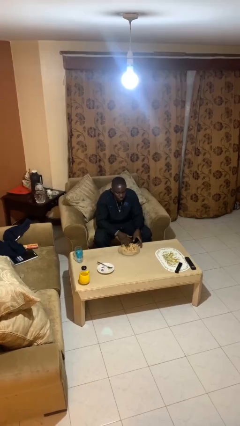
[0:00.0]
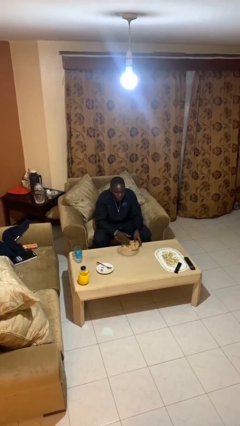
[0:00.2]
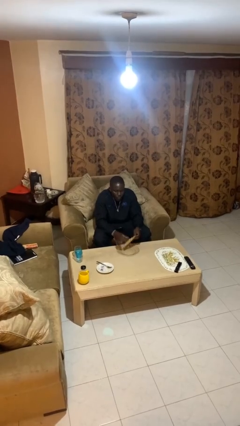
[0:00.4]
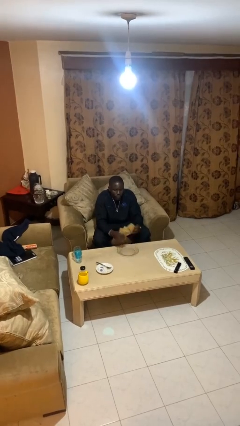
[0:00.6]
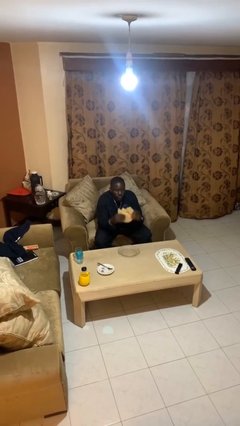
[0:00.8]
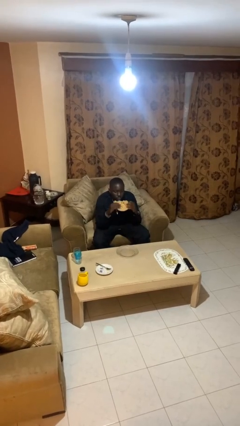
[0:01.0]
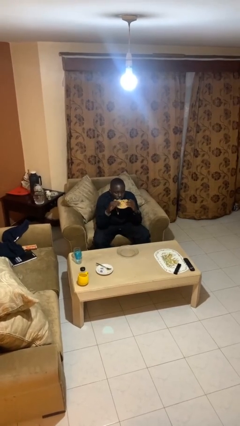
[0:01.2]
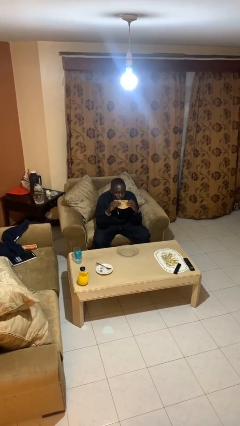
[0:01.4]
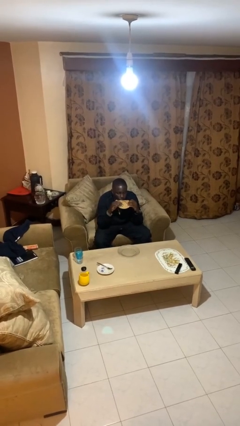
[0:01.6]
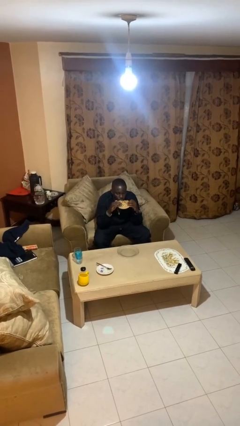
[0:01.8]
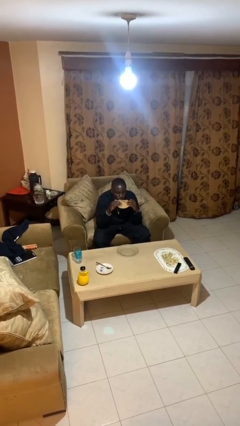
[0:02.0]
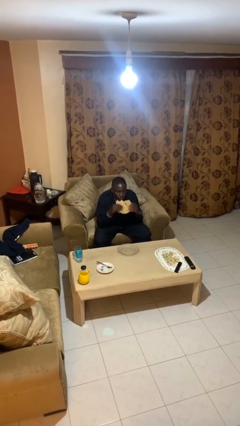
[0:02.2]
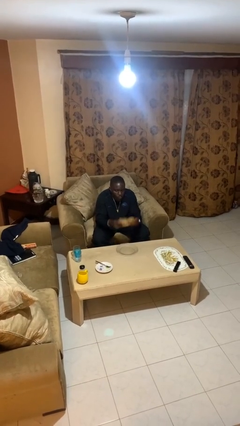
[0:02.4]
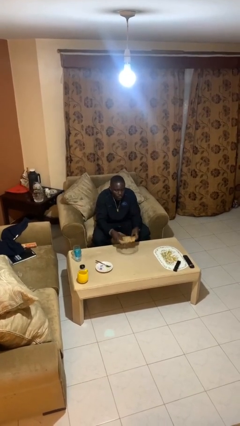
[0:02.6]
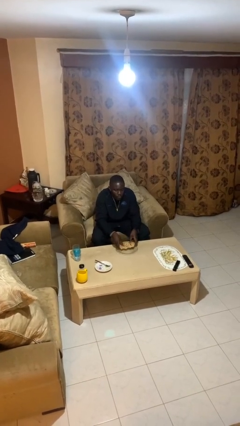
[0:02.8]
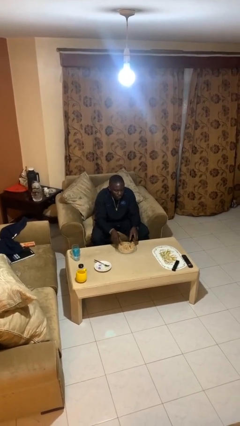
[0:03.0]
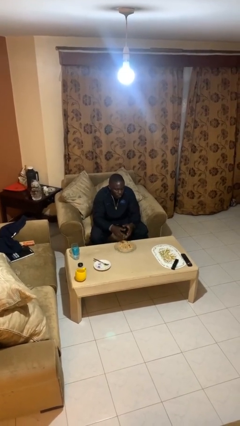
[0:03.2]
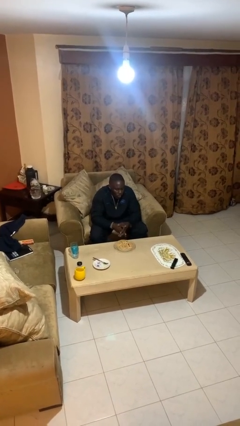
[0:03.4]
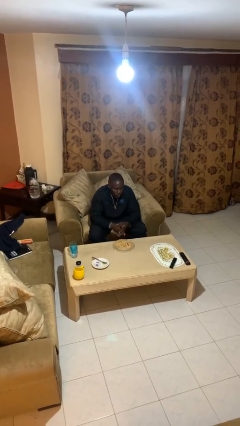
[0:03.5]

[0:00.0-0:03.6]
person eats with hands

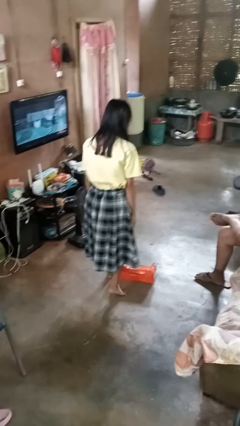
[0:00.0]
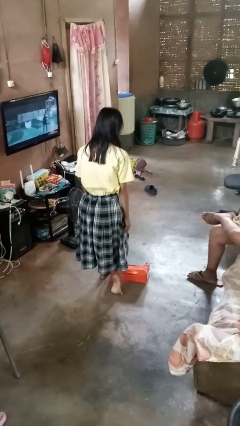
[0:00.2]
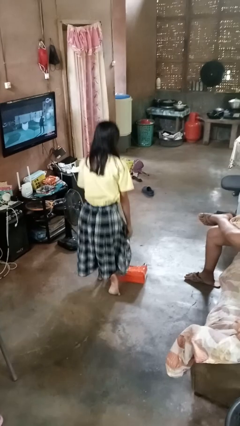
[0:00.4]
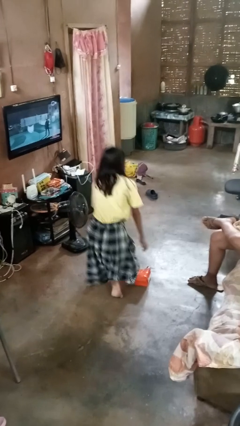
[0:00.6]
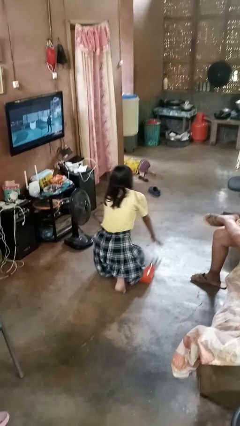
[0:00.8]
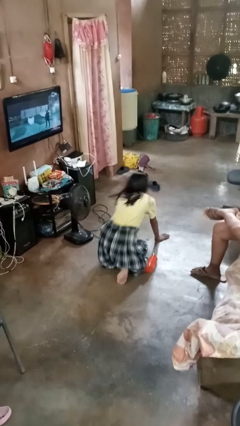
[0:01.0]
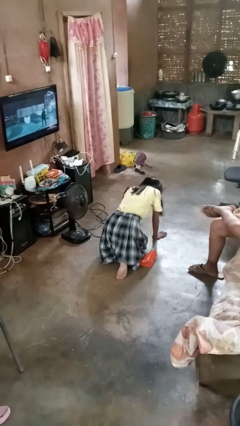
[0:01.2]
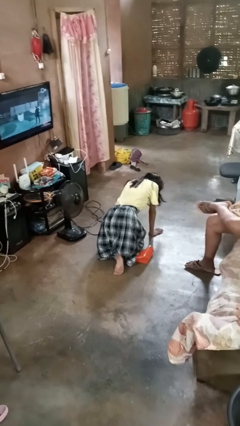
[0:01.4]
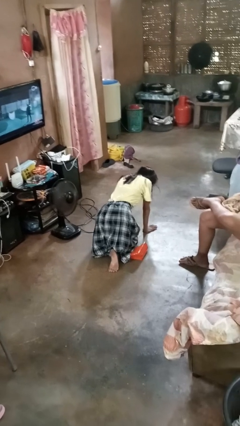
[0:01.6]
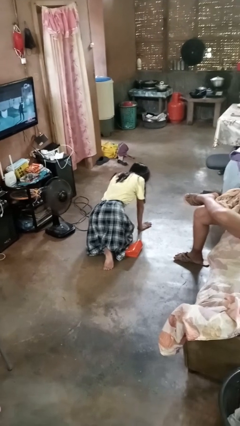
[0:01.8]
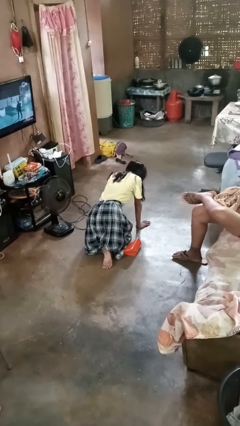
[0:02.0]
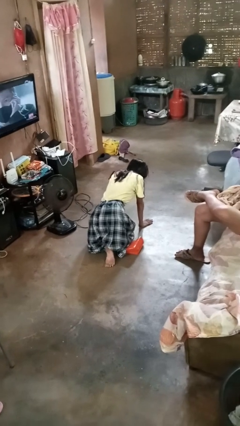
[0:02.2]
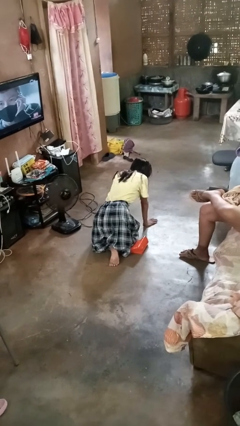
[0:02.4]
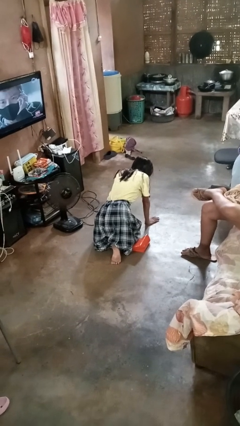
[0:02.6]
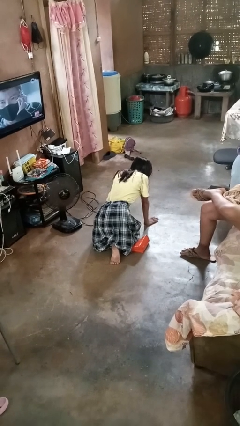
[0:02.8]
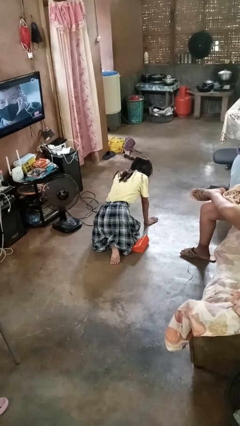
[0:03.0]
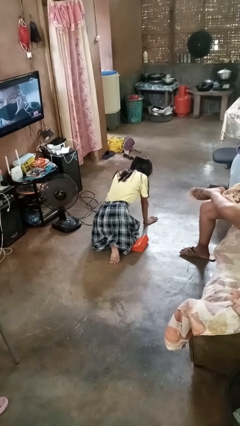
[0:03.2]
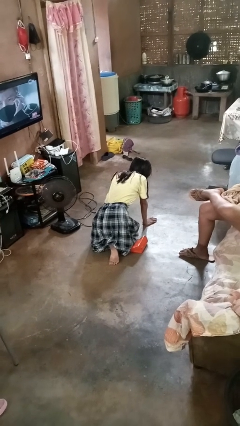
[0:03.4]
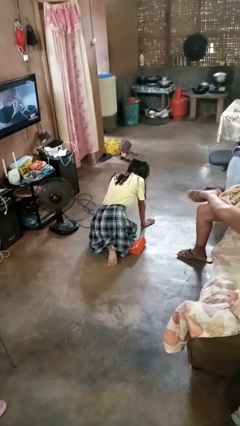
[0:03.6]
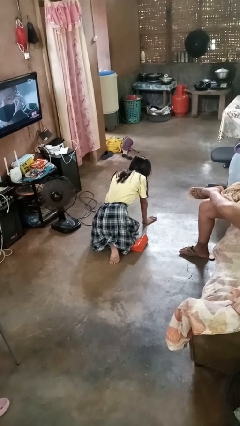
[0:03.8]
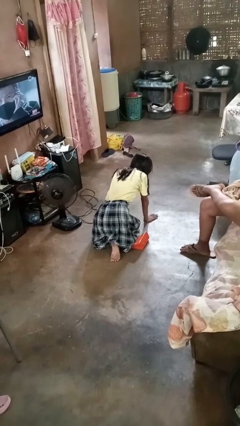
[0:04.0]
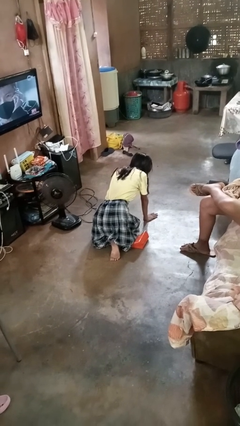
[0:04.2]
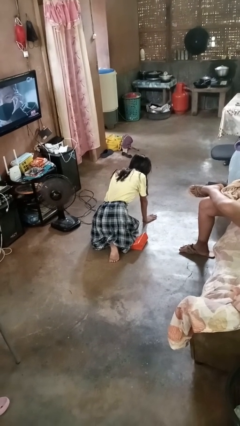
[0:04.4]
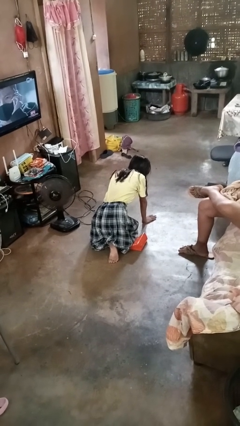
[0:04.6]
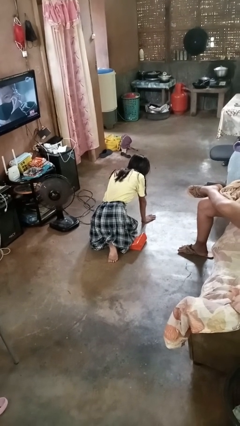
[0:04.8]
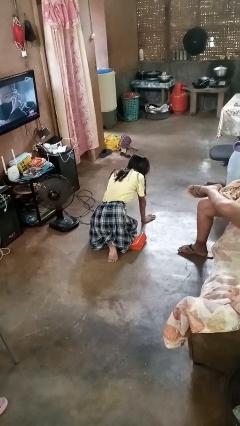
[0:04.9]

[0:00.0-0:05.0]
person trips on object on floor

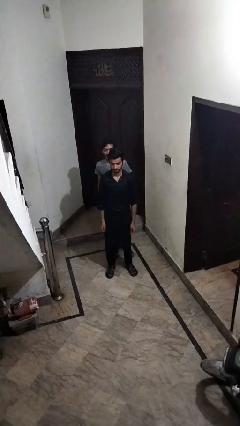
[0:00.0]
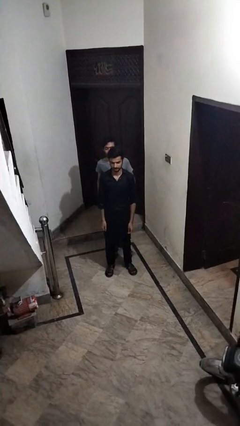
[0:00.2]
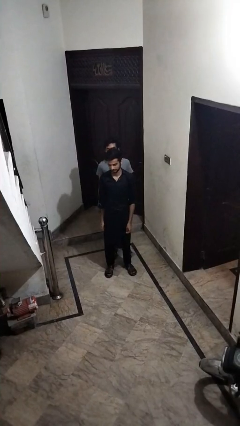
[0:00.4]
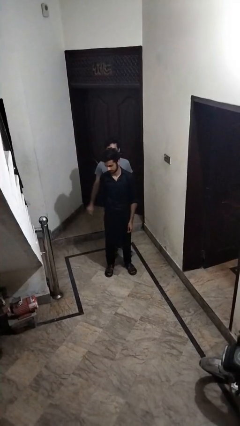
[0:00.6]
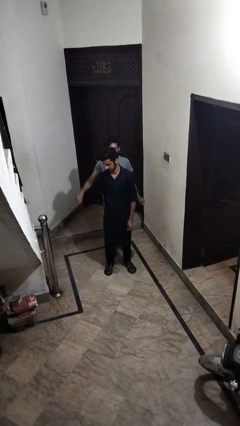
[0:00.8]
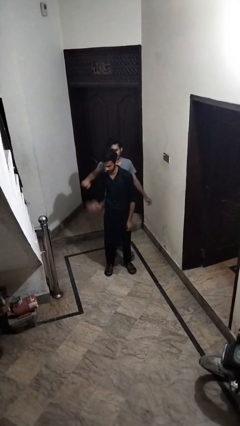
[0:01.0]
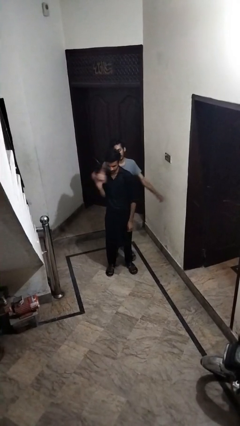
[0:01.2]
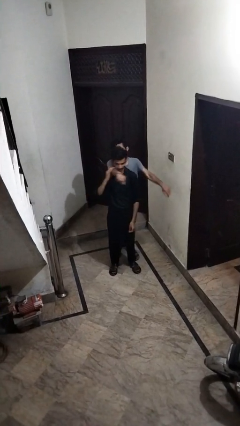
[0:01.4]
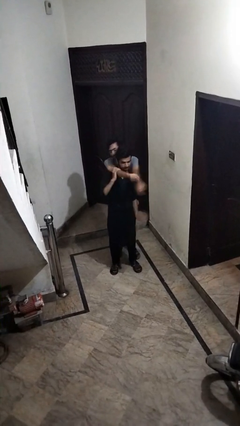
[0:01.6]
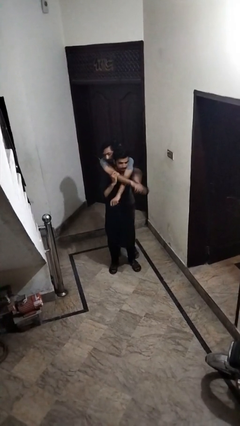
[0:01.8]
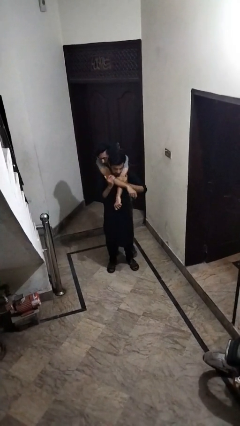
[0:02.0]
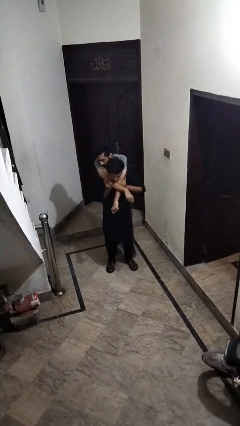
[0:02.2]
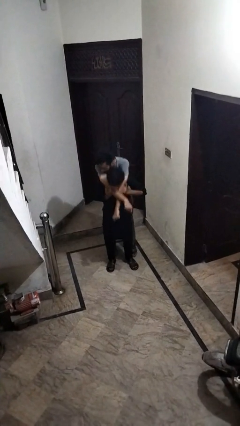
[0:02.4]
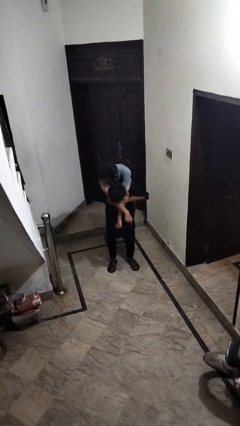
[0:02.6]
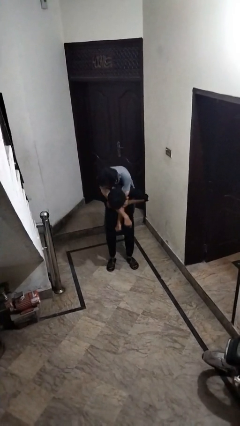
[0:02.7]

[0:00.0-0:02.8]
person carries person over shoulder

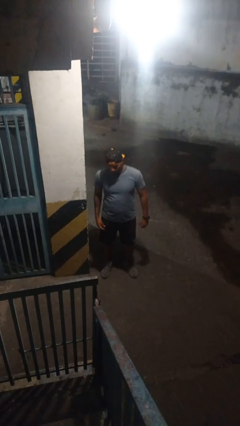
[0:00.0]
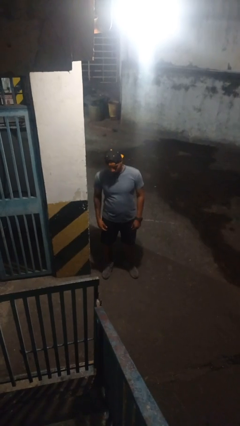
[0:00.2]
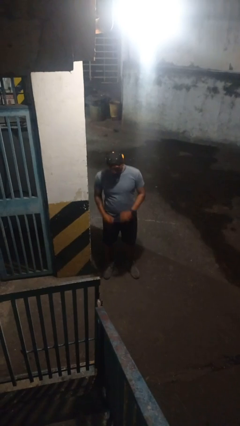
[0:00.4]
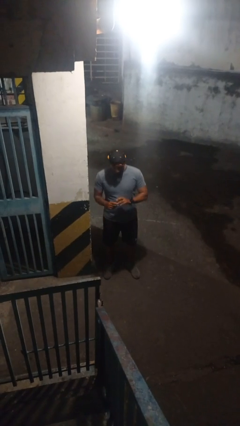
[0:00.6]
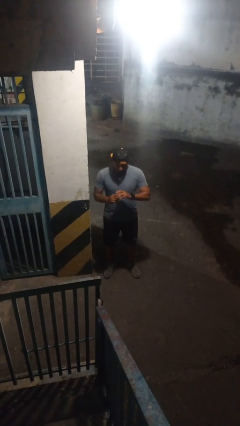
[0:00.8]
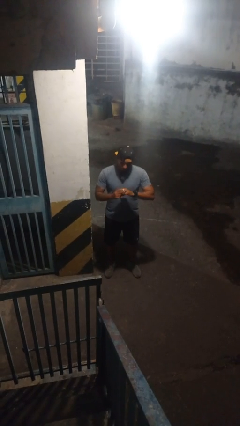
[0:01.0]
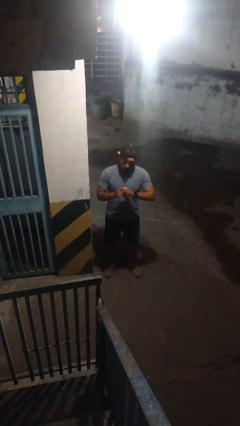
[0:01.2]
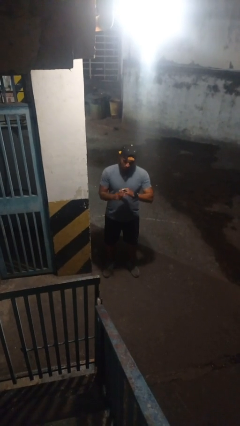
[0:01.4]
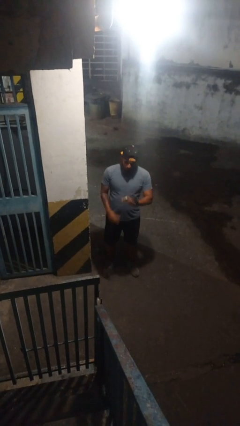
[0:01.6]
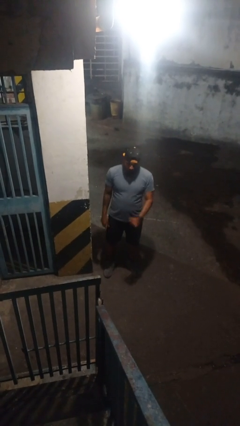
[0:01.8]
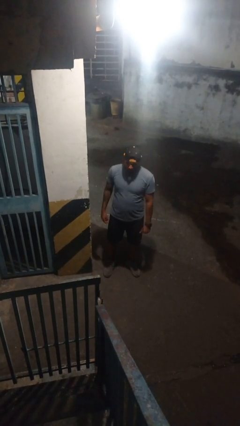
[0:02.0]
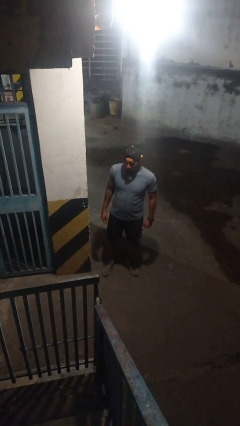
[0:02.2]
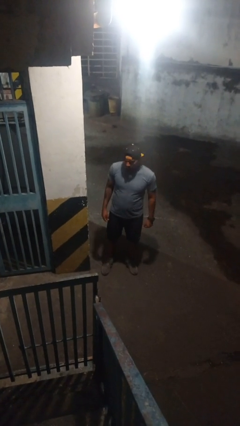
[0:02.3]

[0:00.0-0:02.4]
person puts on ring

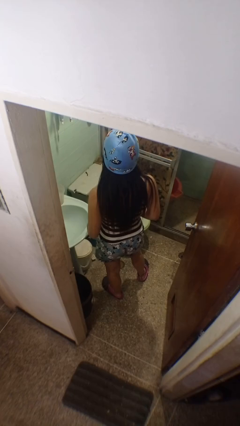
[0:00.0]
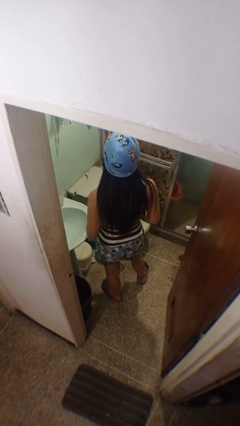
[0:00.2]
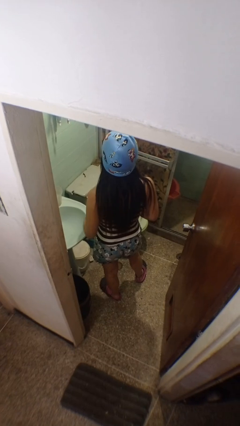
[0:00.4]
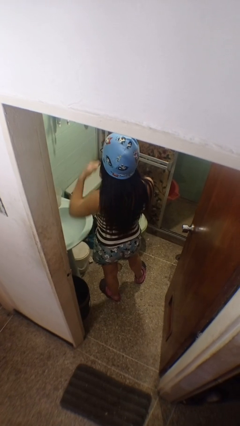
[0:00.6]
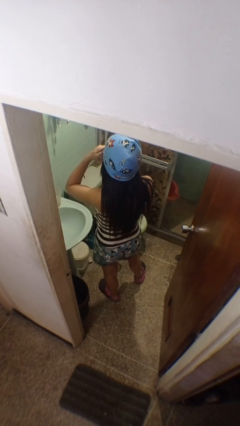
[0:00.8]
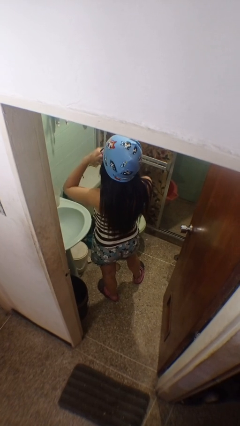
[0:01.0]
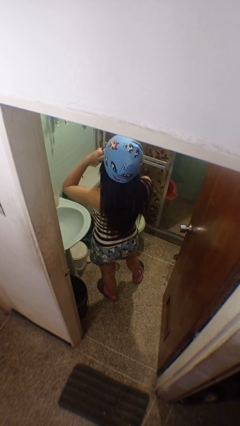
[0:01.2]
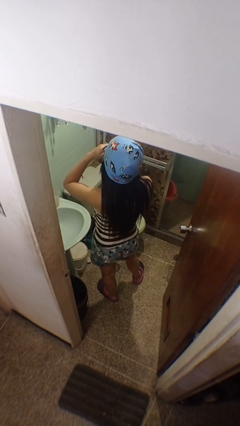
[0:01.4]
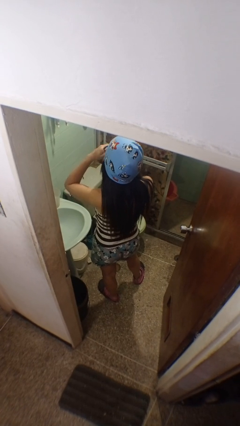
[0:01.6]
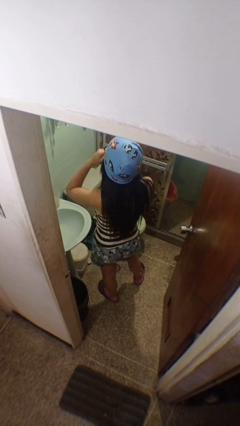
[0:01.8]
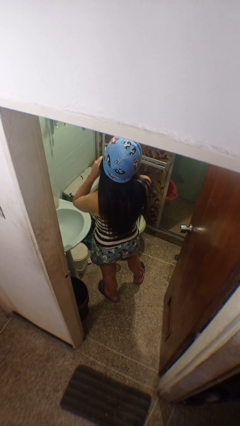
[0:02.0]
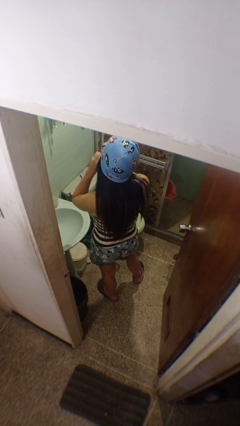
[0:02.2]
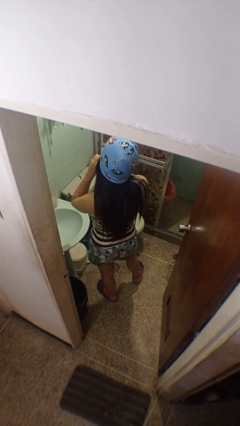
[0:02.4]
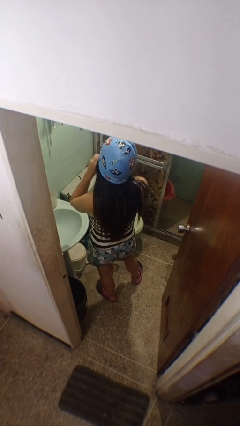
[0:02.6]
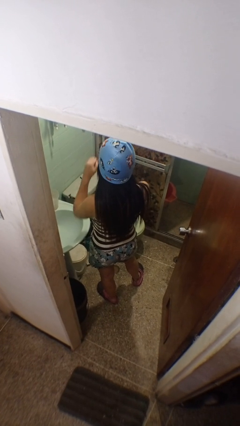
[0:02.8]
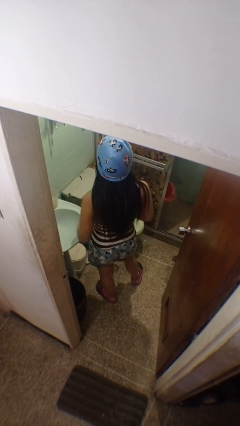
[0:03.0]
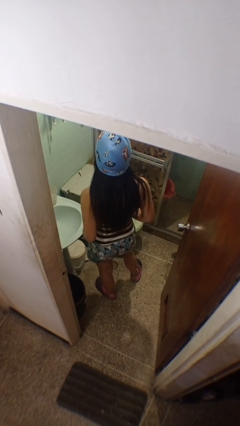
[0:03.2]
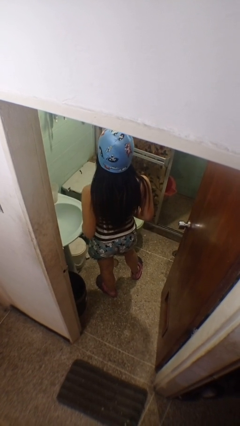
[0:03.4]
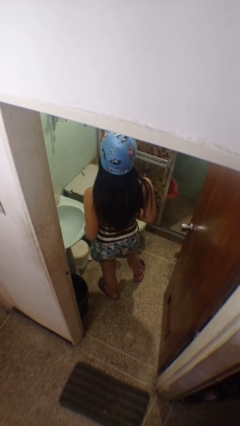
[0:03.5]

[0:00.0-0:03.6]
person flosses
